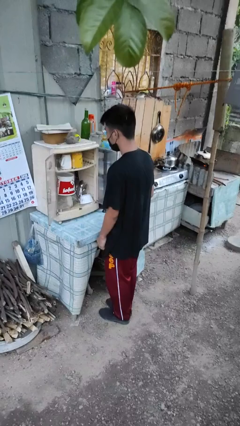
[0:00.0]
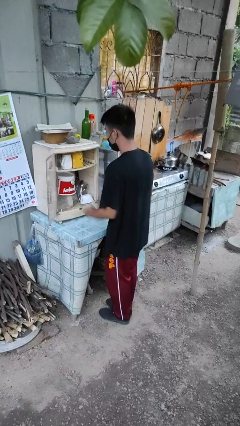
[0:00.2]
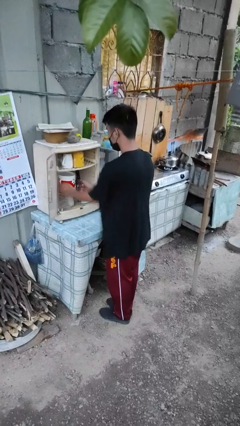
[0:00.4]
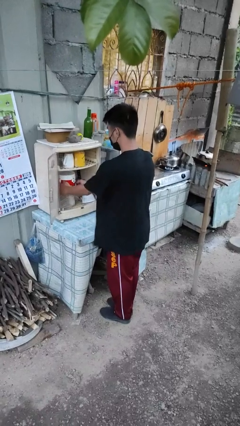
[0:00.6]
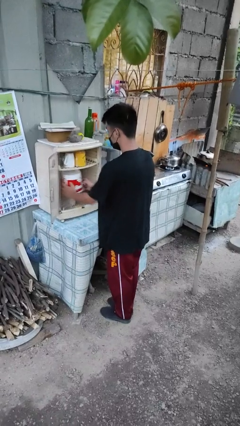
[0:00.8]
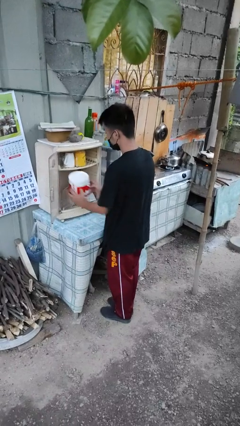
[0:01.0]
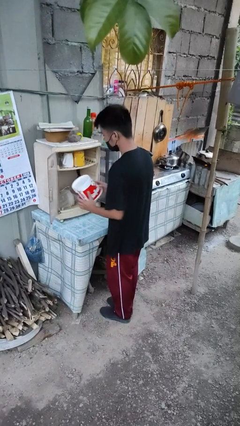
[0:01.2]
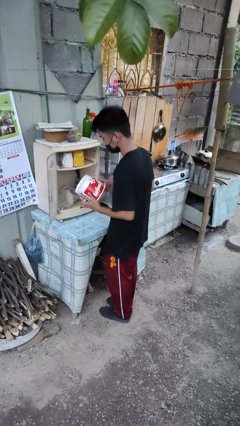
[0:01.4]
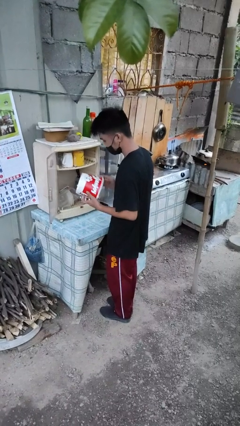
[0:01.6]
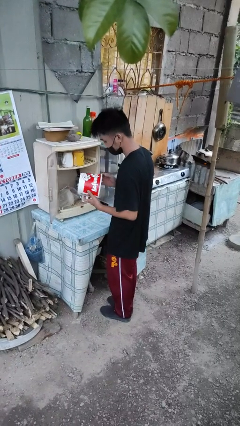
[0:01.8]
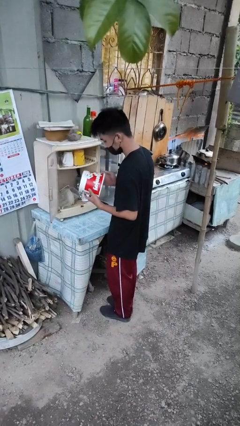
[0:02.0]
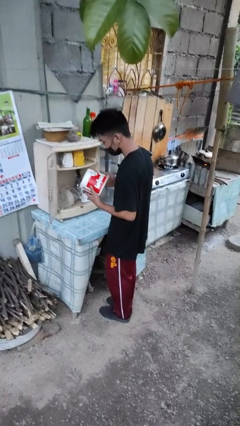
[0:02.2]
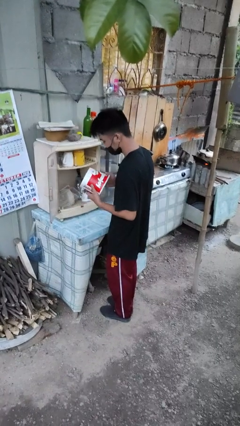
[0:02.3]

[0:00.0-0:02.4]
person picks up object from cabinet

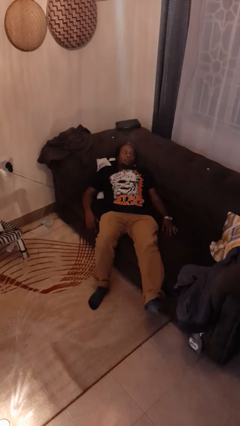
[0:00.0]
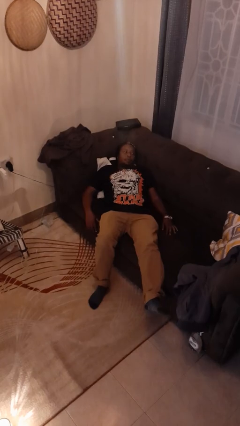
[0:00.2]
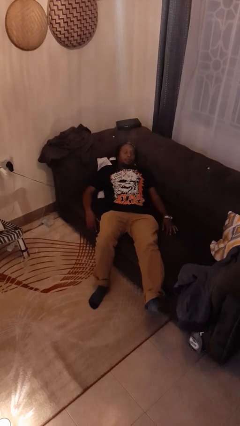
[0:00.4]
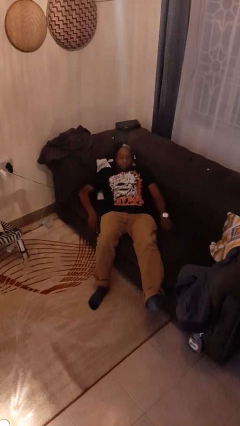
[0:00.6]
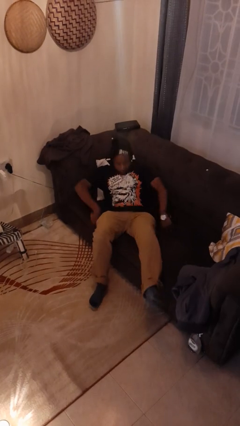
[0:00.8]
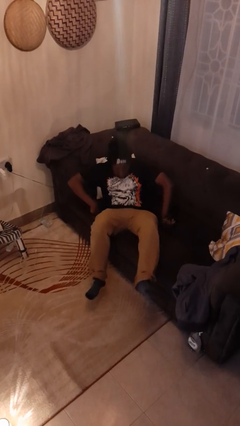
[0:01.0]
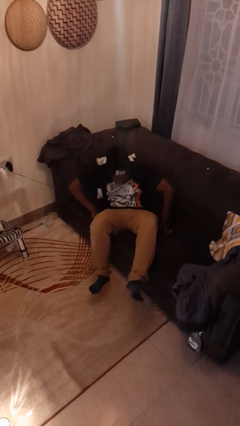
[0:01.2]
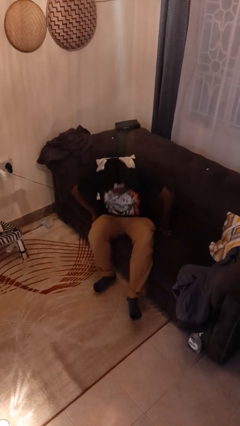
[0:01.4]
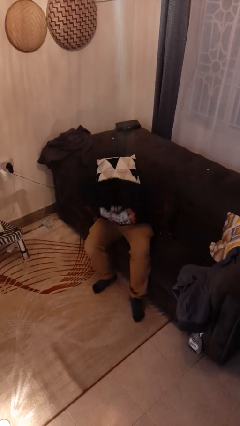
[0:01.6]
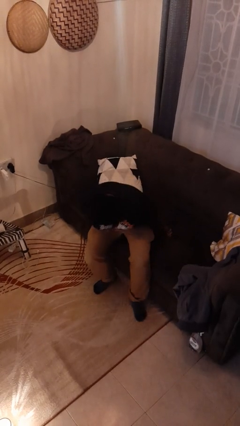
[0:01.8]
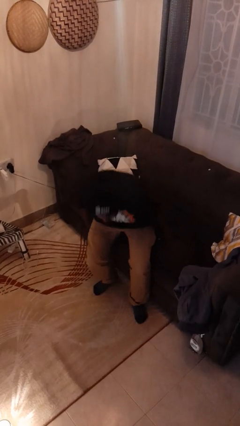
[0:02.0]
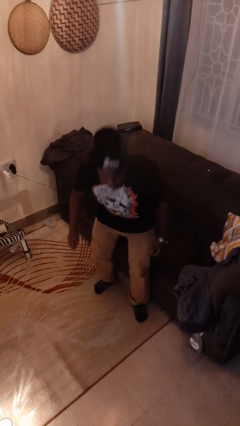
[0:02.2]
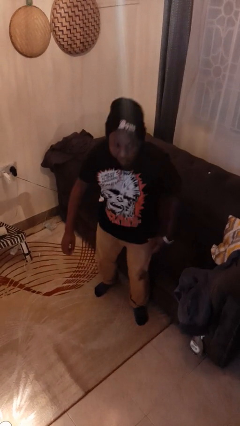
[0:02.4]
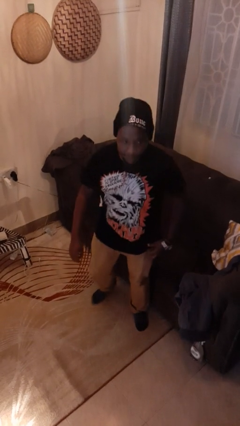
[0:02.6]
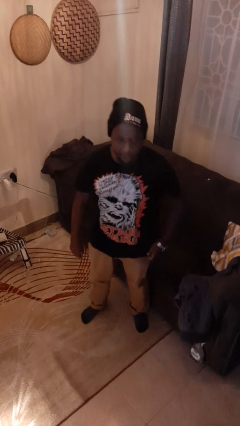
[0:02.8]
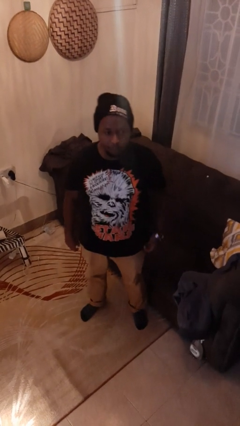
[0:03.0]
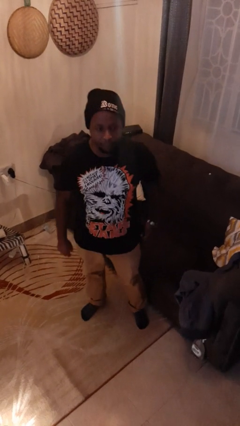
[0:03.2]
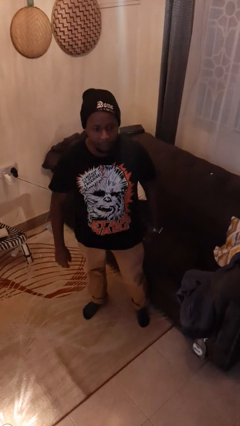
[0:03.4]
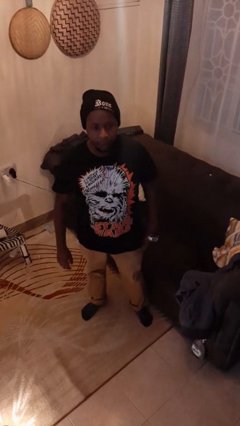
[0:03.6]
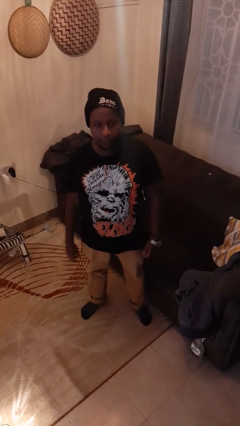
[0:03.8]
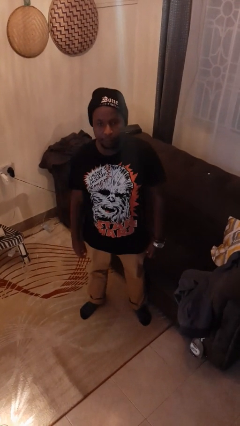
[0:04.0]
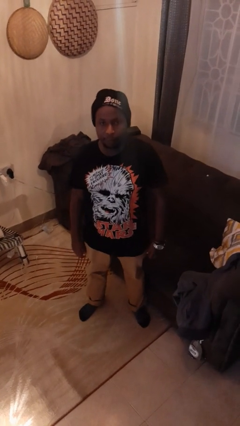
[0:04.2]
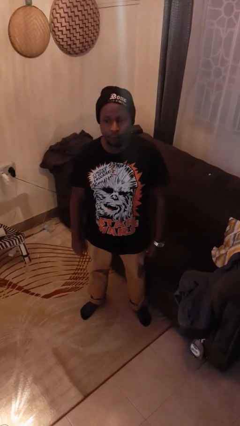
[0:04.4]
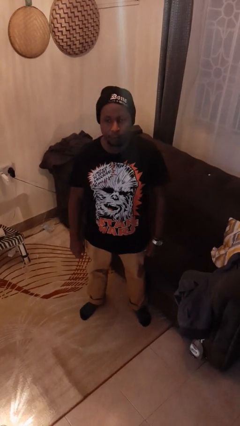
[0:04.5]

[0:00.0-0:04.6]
person stands up

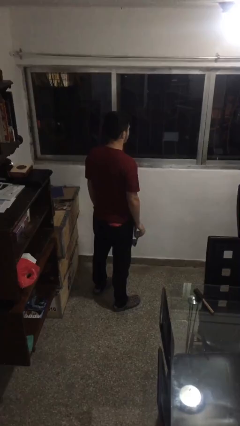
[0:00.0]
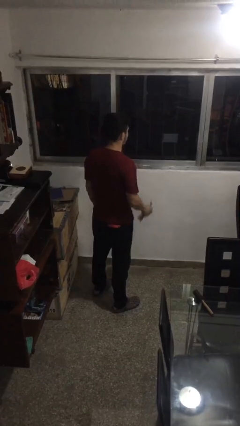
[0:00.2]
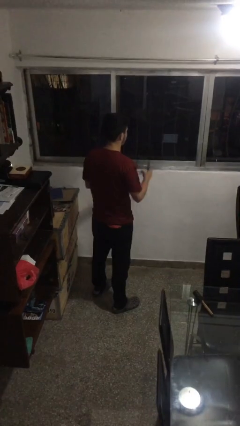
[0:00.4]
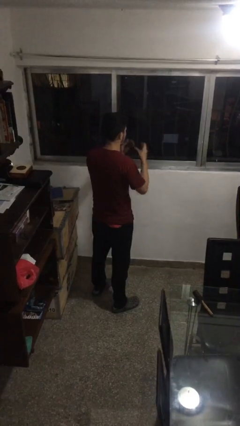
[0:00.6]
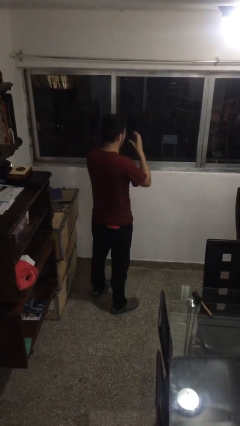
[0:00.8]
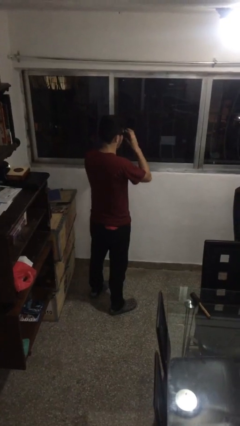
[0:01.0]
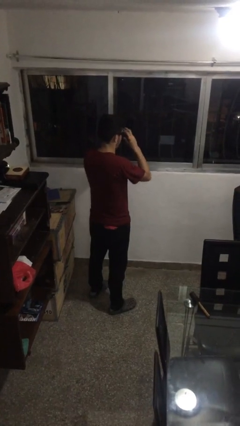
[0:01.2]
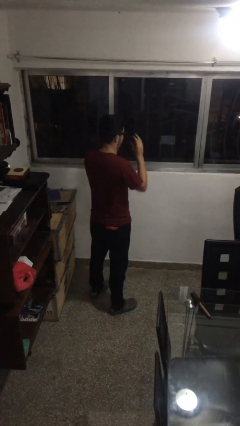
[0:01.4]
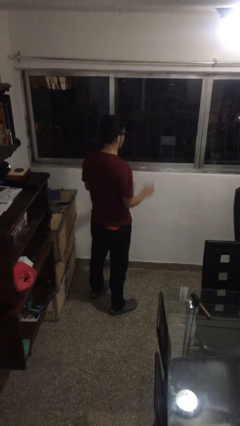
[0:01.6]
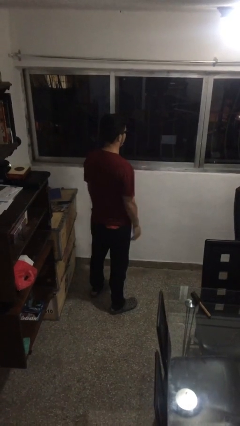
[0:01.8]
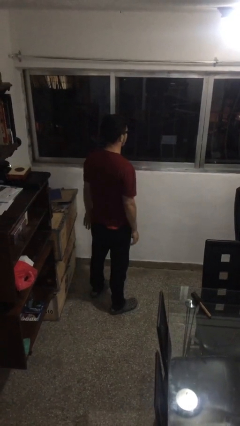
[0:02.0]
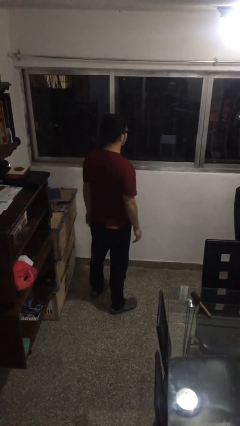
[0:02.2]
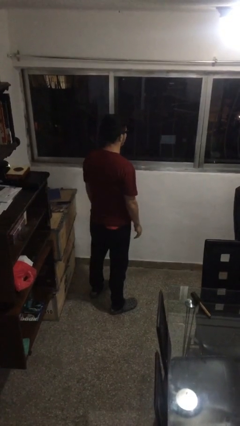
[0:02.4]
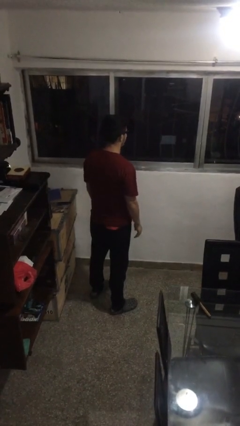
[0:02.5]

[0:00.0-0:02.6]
person puts on sunglasses

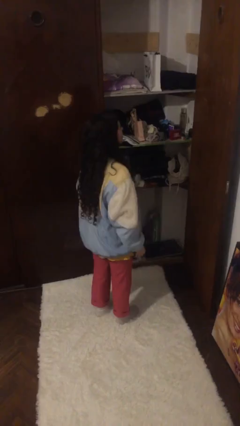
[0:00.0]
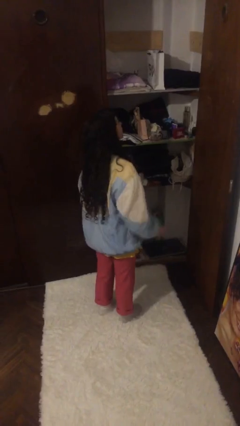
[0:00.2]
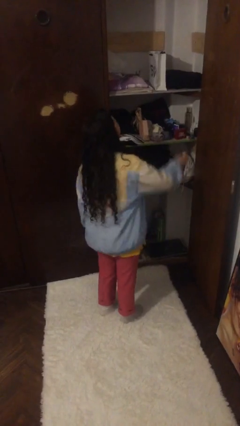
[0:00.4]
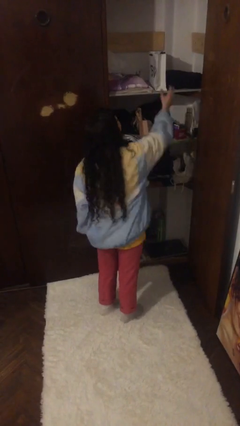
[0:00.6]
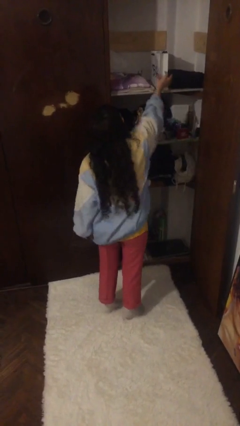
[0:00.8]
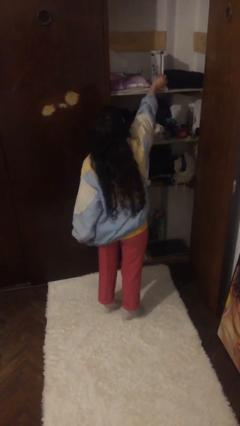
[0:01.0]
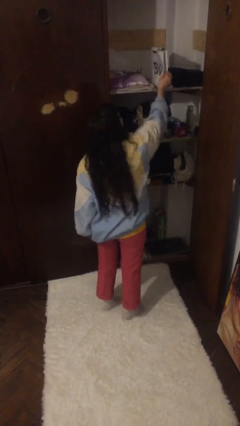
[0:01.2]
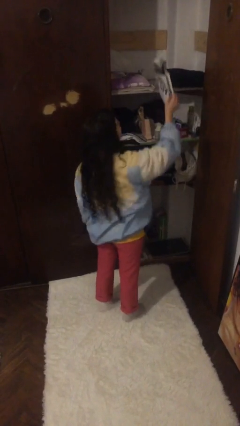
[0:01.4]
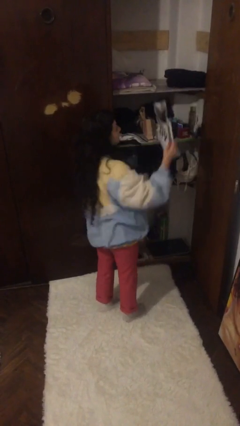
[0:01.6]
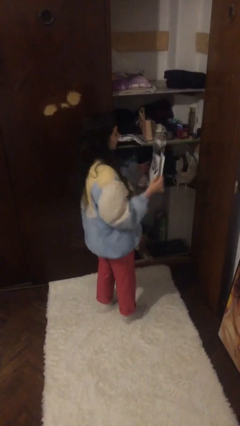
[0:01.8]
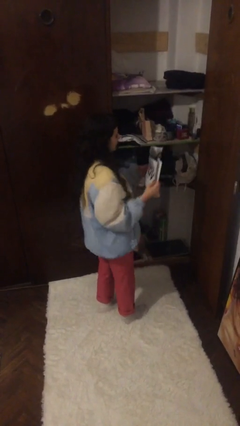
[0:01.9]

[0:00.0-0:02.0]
person picks up object from shelf

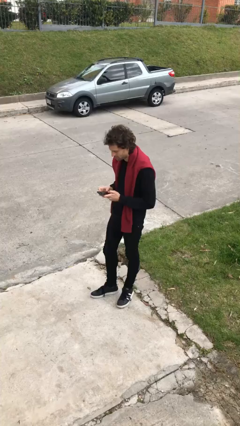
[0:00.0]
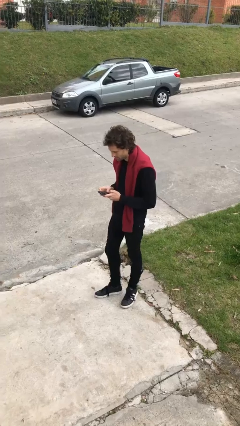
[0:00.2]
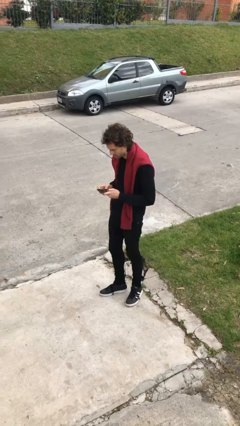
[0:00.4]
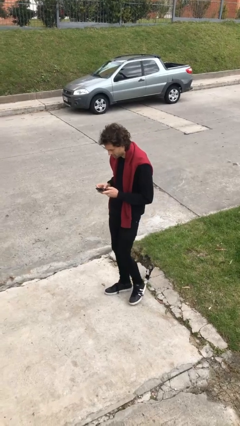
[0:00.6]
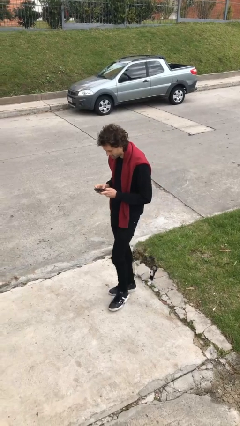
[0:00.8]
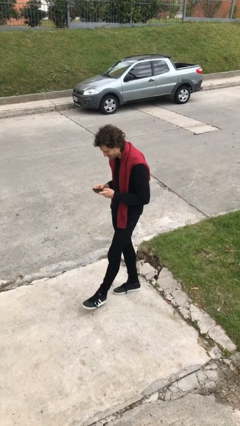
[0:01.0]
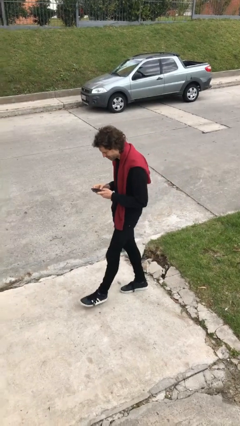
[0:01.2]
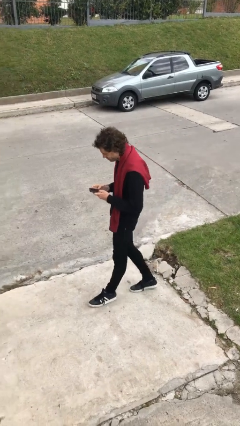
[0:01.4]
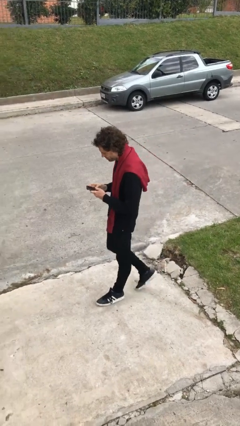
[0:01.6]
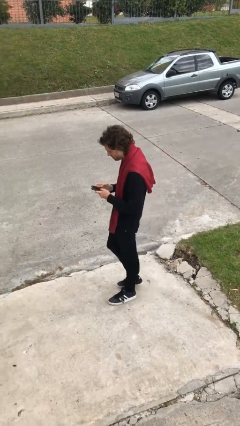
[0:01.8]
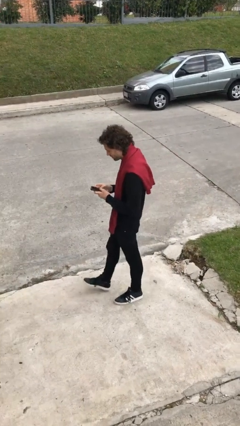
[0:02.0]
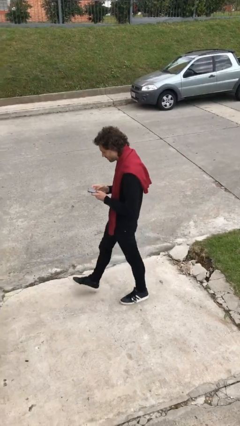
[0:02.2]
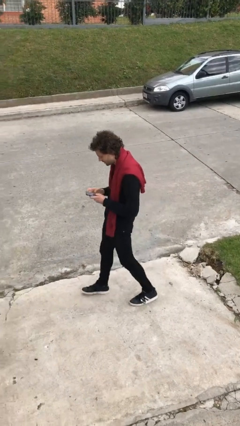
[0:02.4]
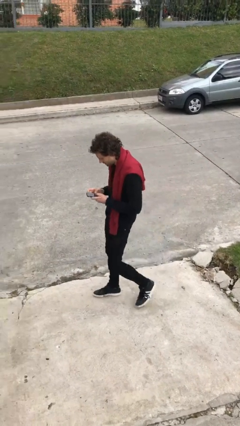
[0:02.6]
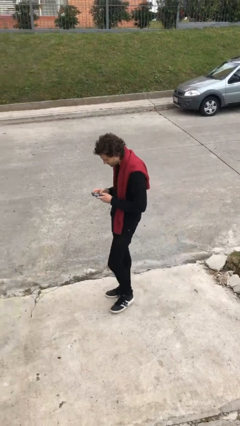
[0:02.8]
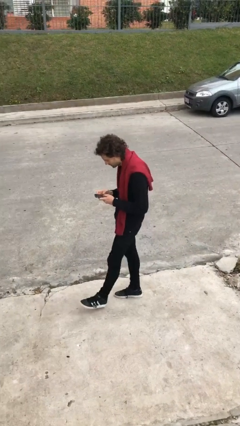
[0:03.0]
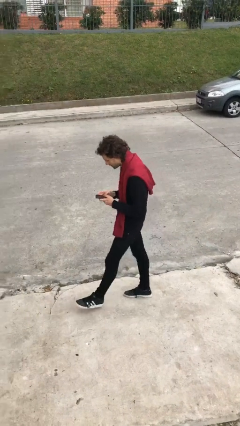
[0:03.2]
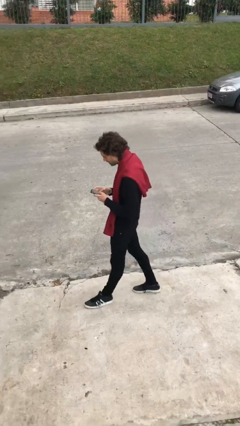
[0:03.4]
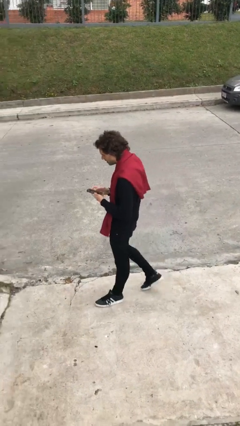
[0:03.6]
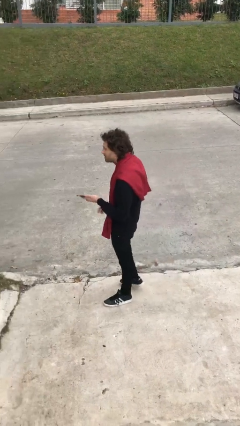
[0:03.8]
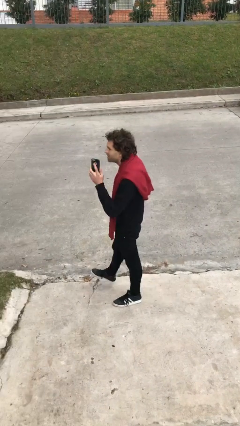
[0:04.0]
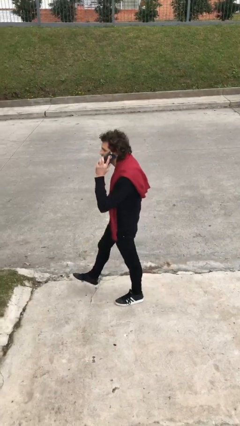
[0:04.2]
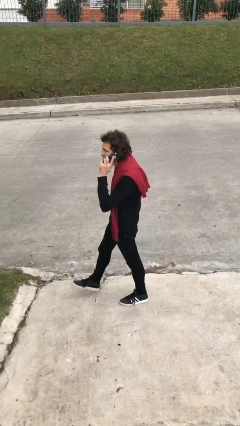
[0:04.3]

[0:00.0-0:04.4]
person texts on phone

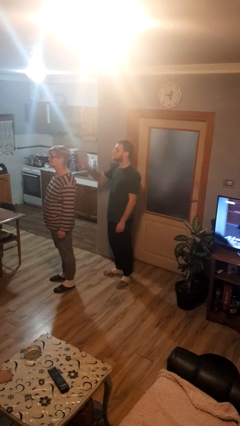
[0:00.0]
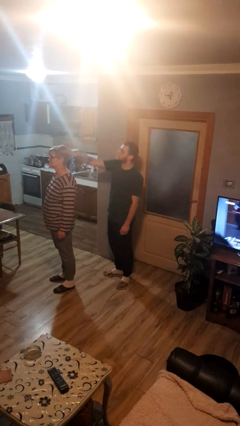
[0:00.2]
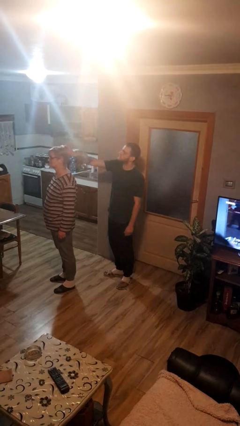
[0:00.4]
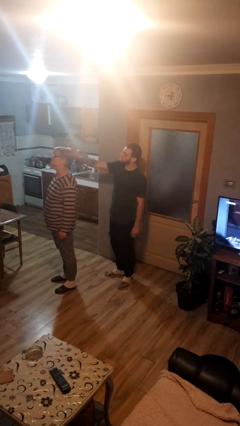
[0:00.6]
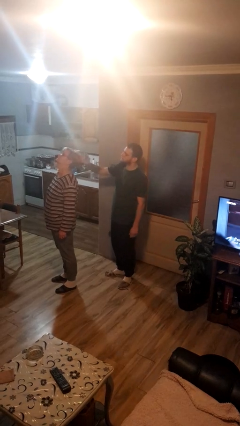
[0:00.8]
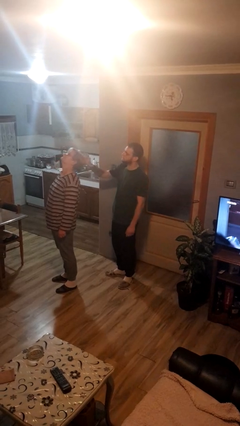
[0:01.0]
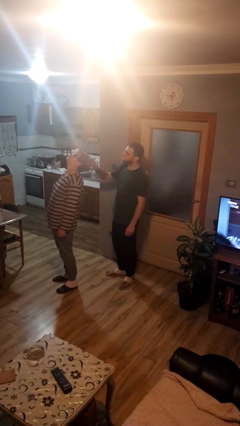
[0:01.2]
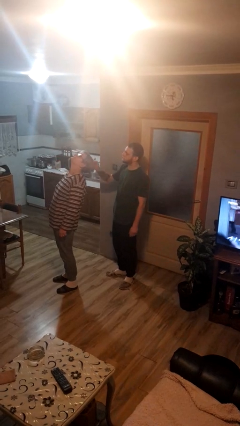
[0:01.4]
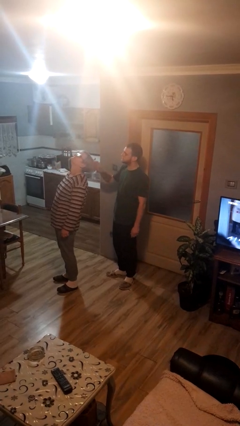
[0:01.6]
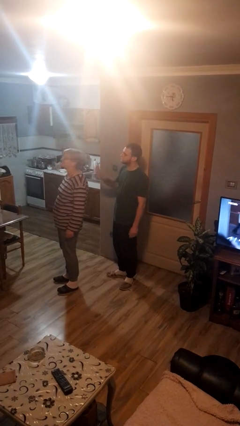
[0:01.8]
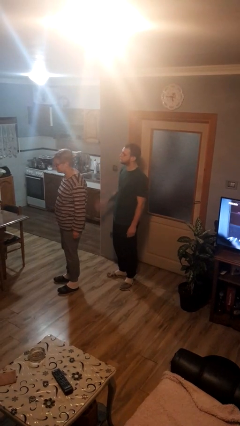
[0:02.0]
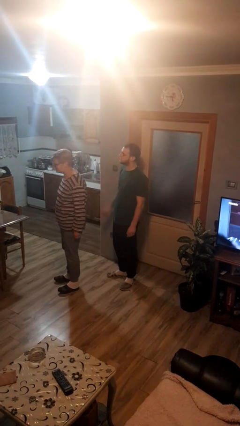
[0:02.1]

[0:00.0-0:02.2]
person grabs person by hair
